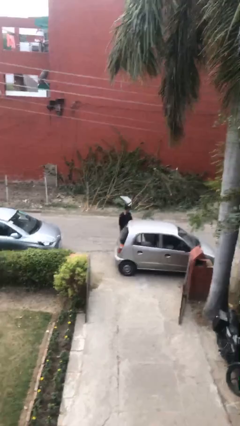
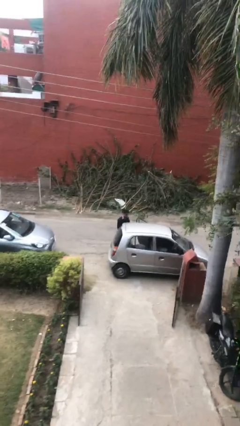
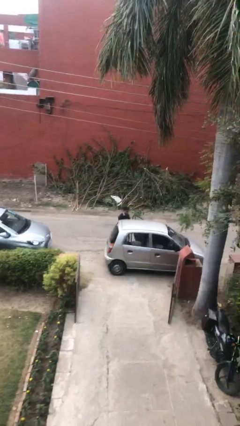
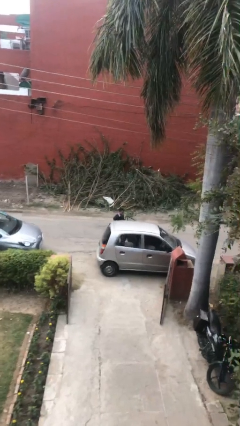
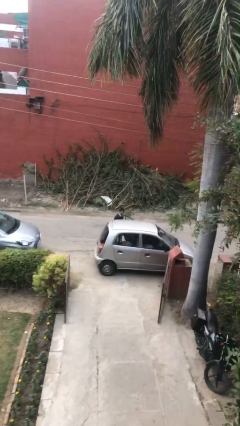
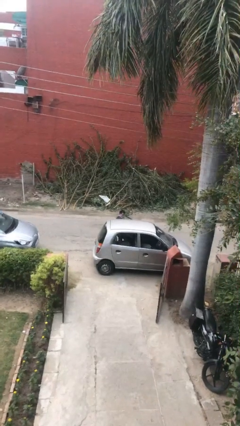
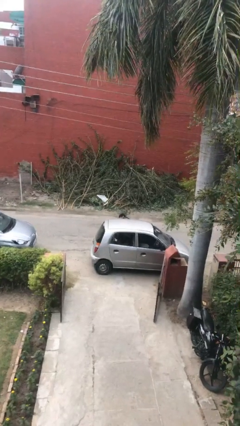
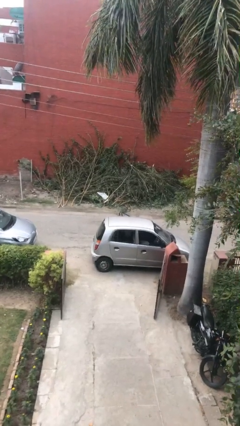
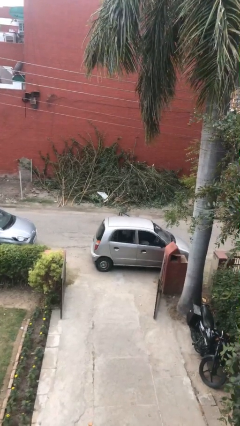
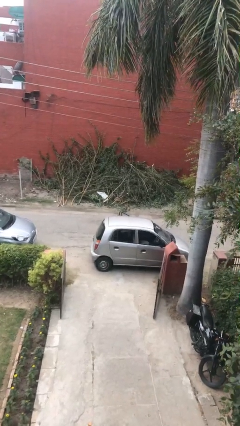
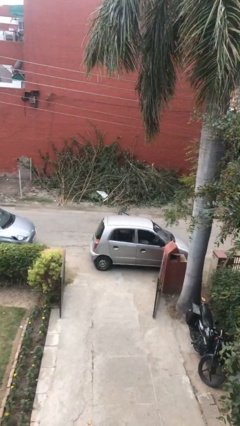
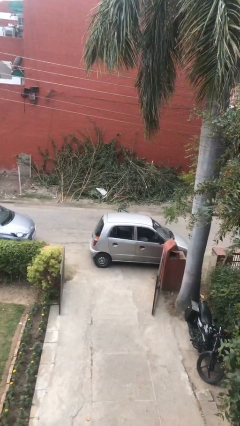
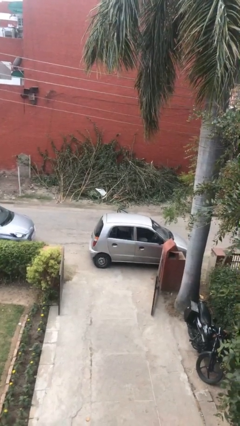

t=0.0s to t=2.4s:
person enters car

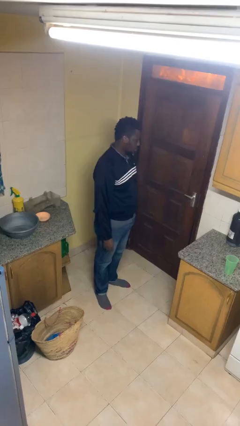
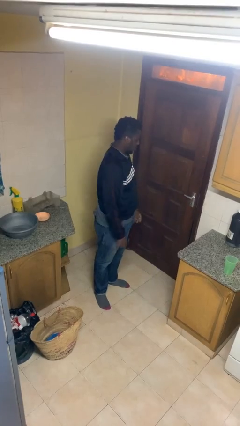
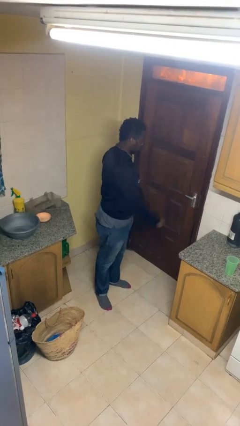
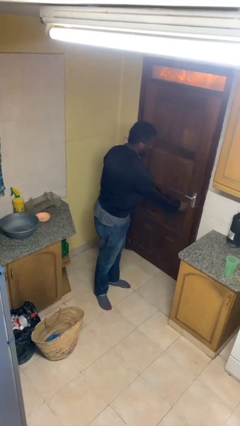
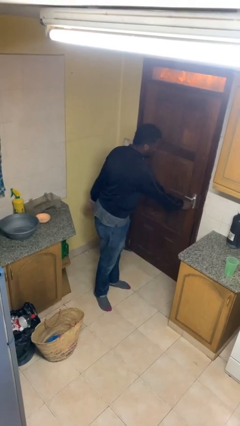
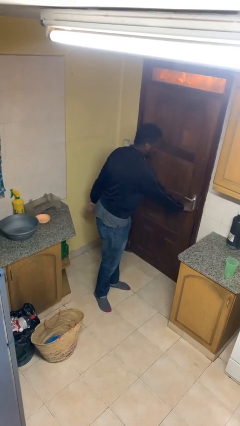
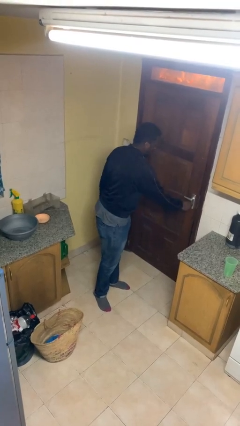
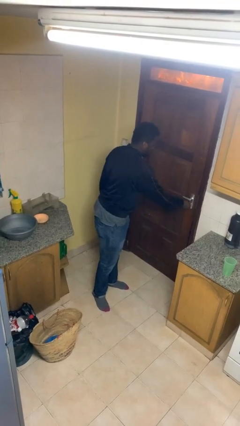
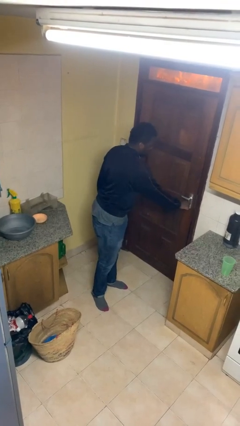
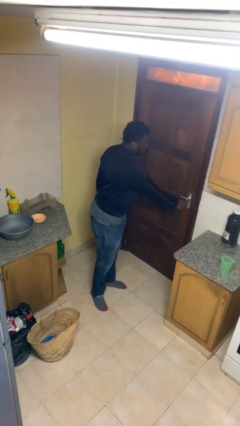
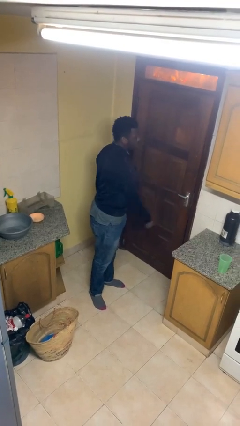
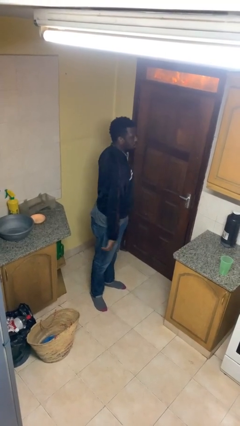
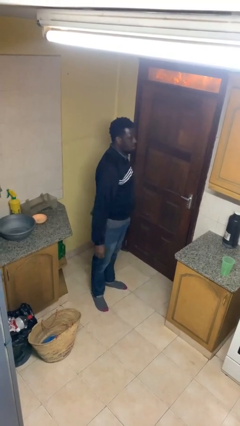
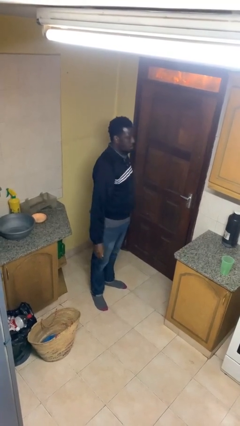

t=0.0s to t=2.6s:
person locks door with keys

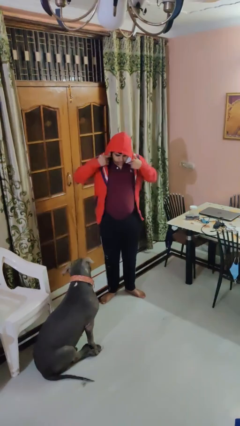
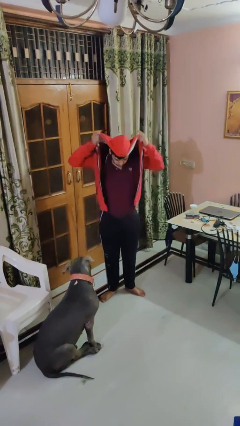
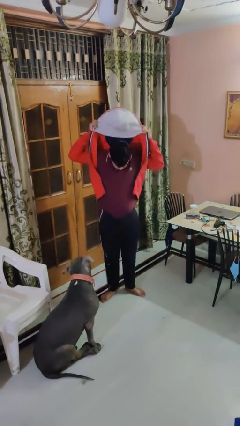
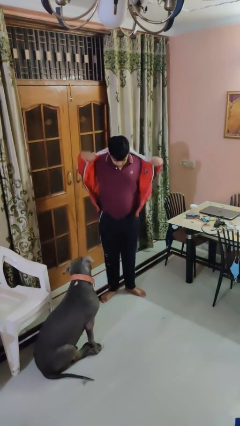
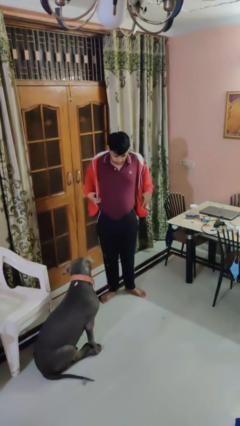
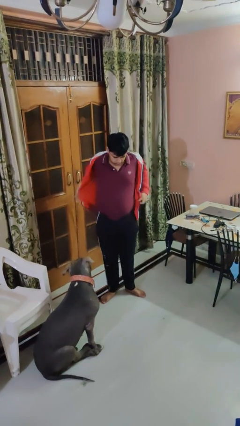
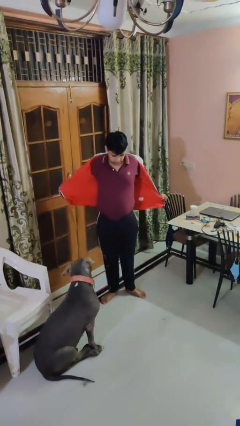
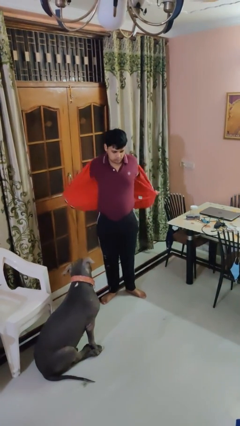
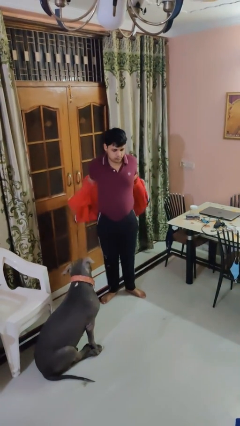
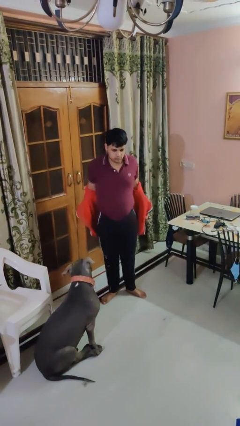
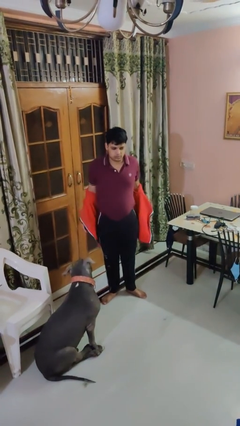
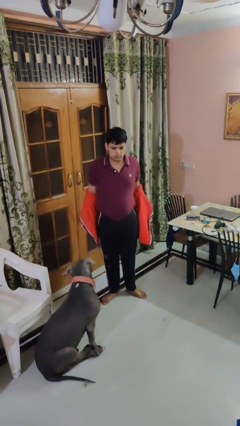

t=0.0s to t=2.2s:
person takes off hoodie

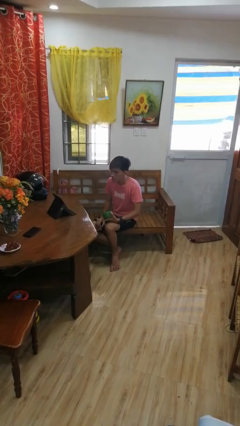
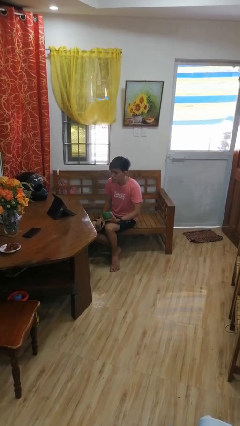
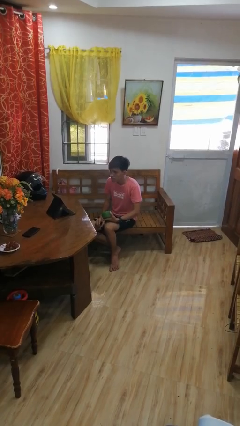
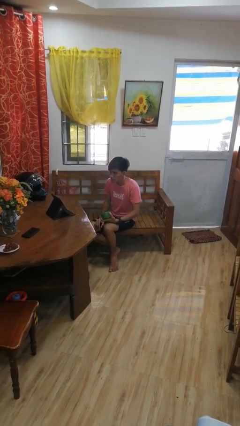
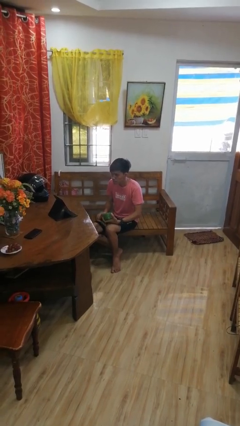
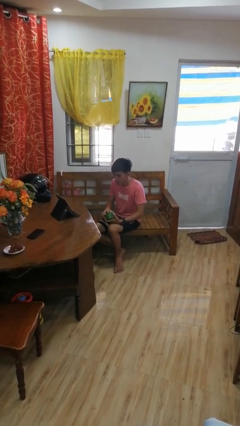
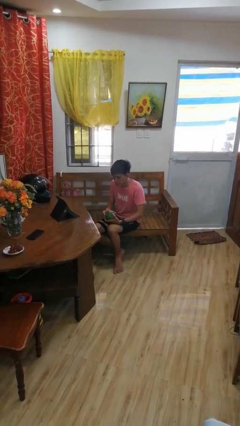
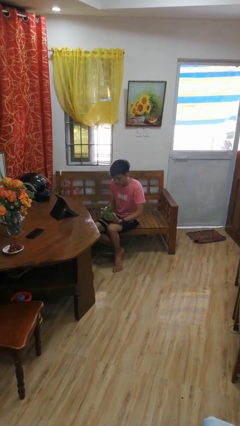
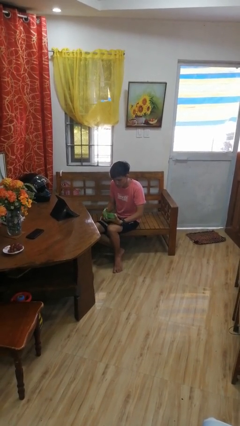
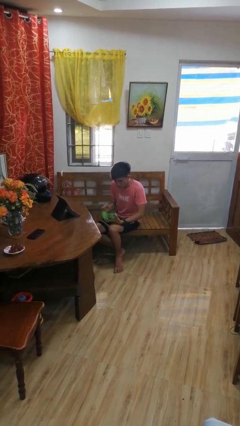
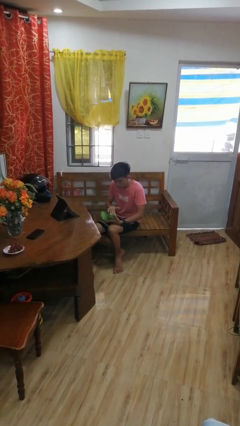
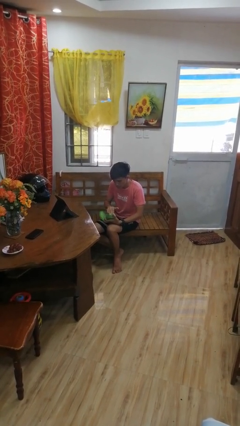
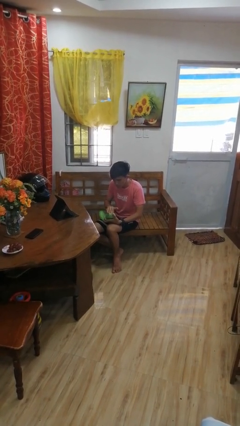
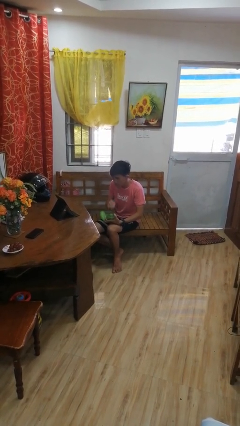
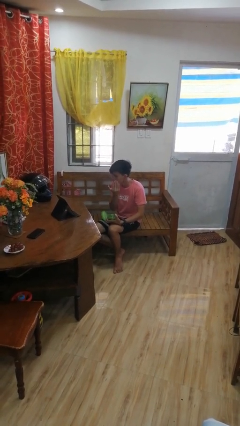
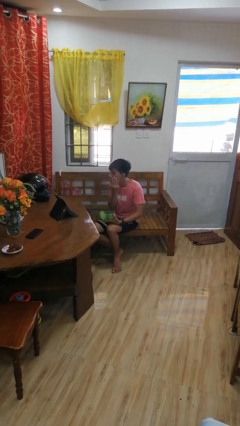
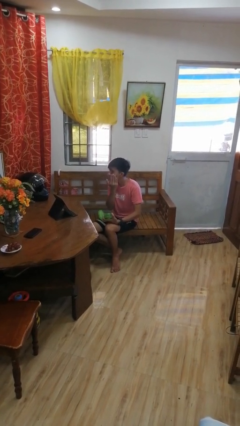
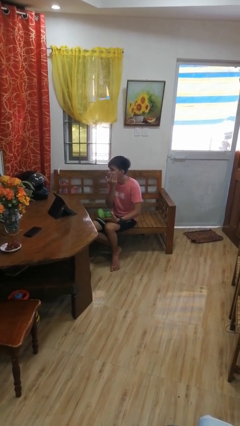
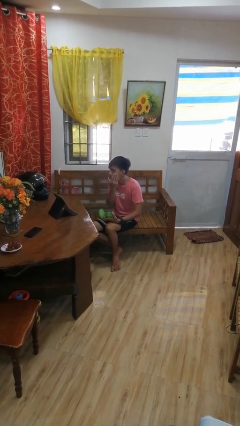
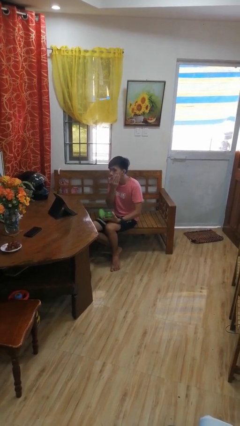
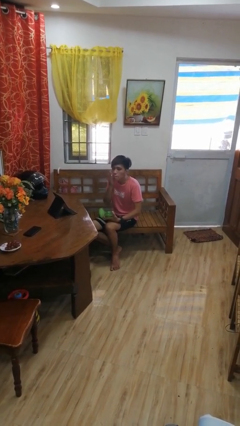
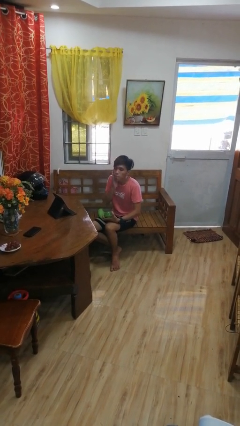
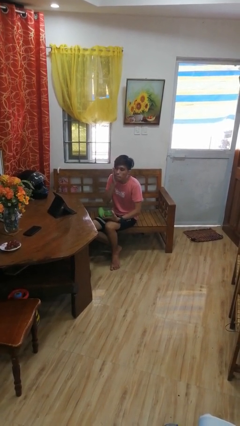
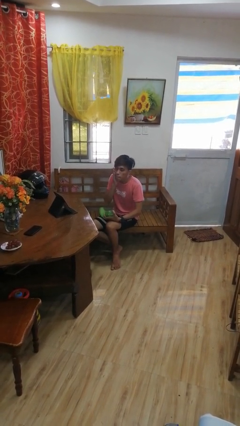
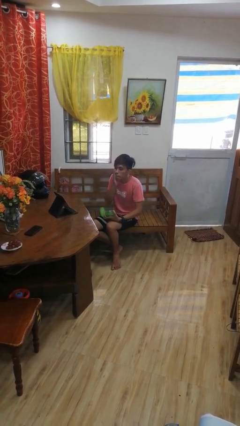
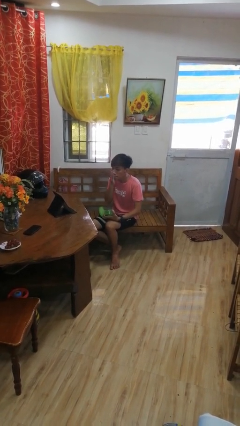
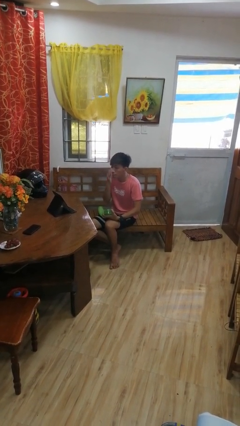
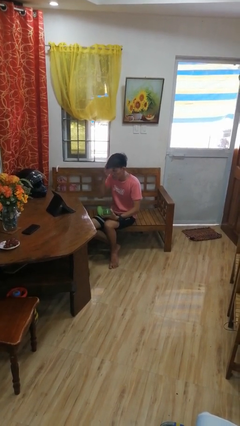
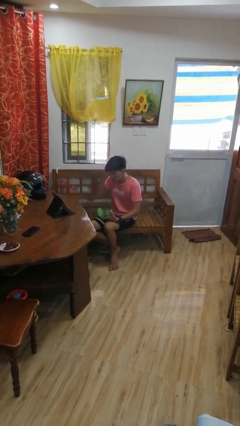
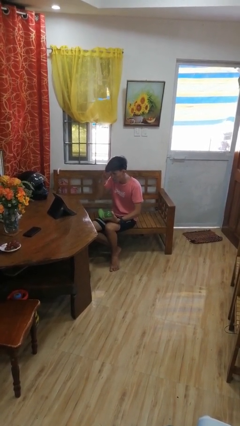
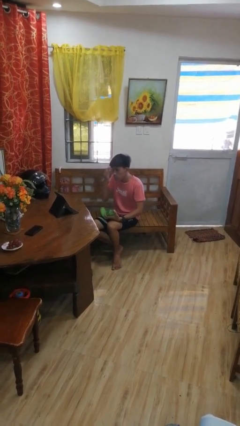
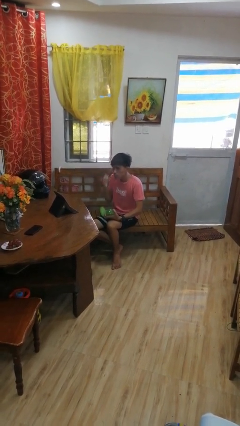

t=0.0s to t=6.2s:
person applies facial moisturizer

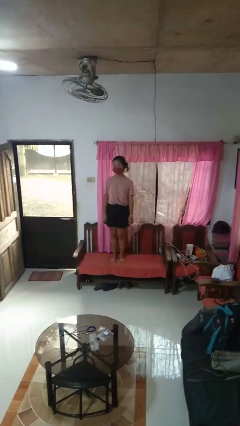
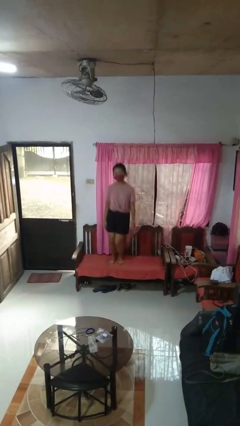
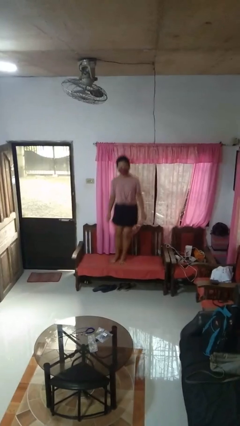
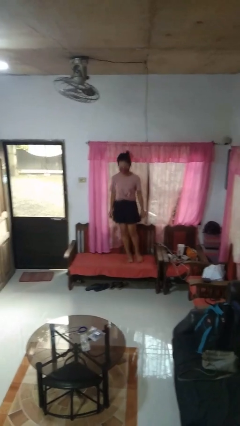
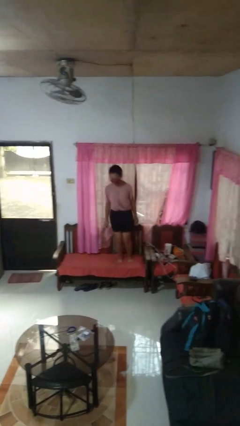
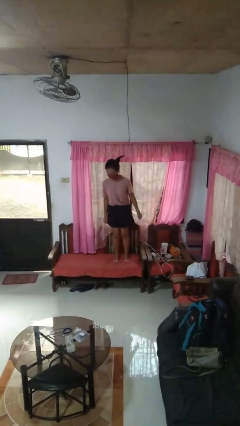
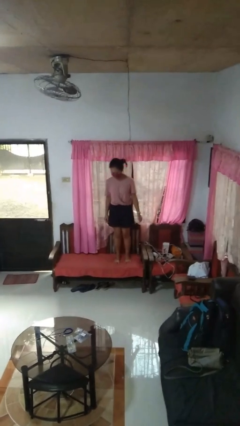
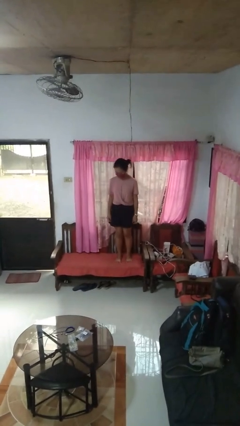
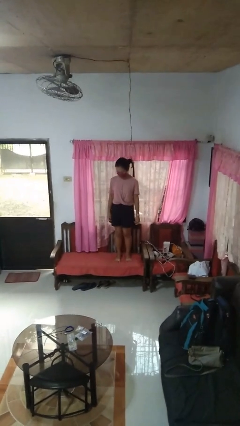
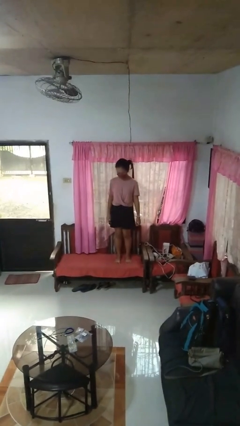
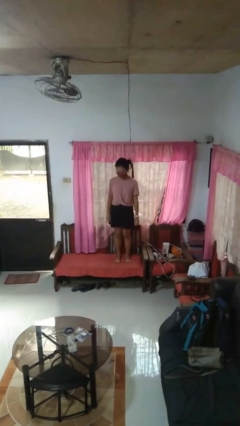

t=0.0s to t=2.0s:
person jumps on couch

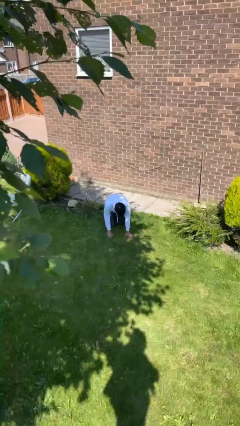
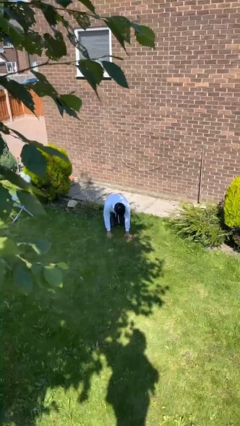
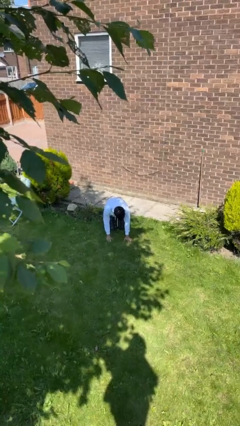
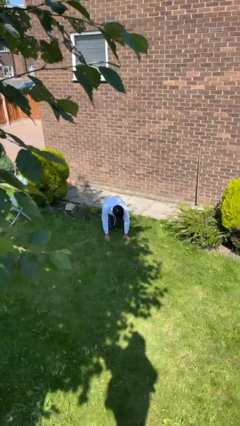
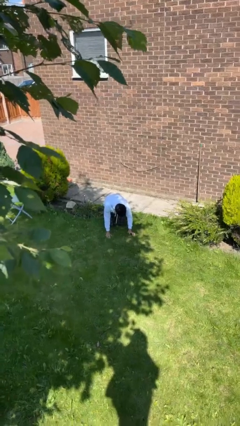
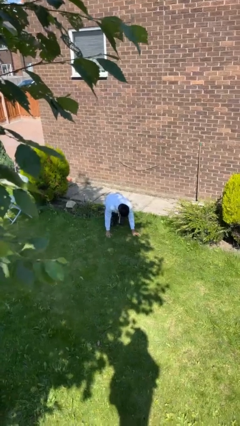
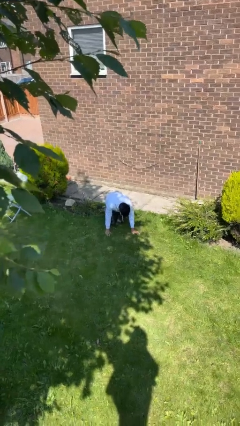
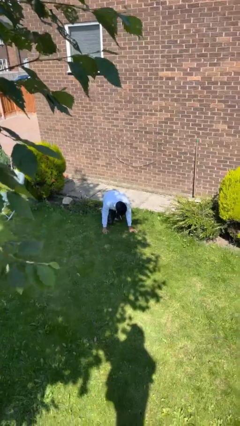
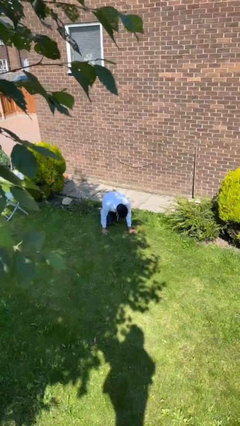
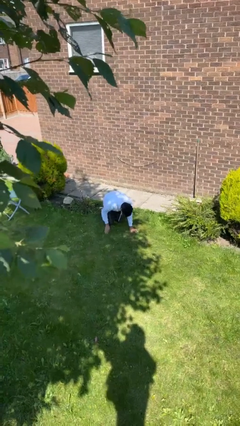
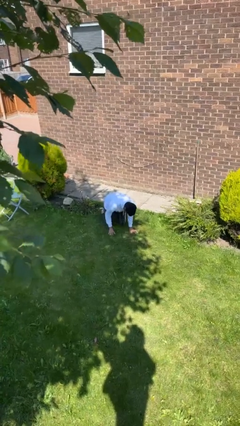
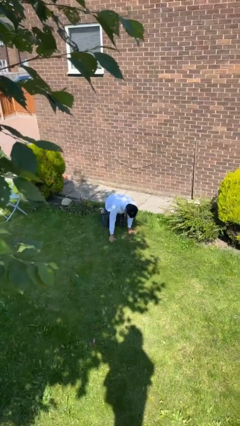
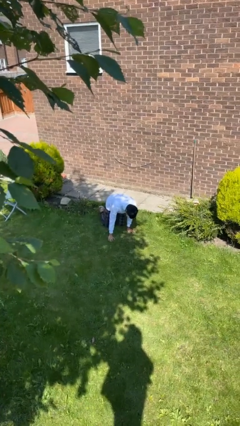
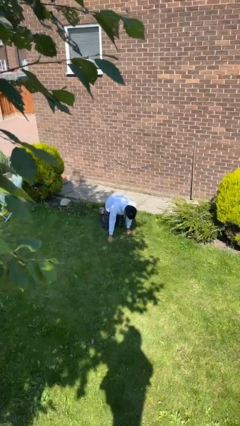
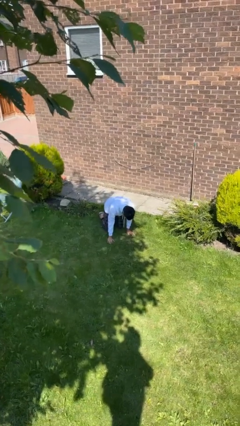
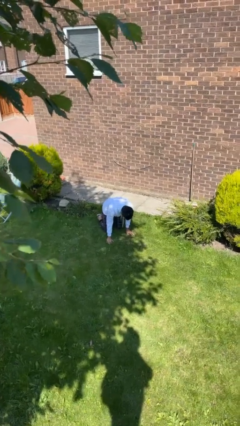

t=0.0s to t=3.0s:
person crawls
